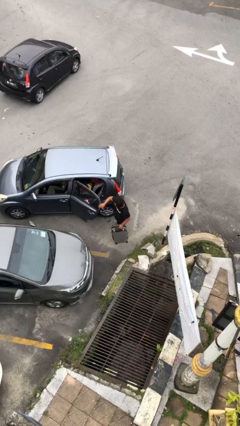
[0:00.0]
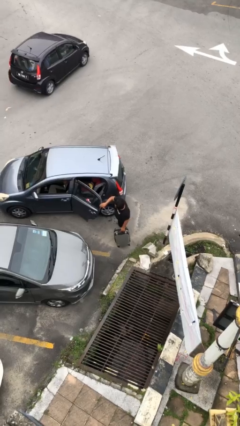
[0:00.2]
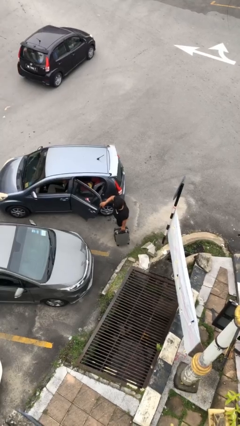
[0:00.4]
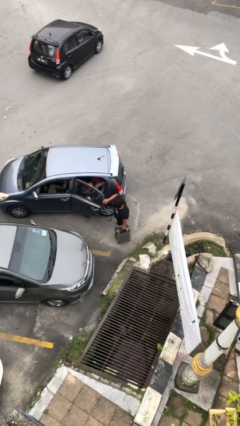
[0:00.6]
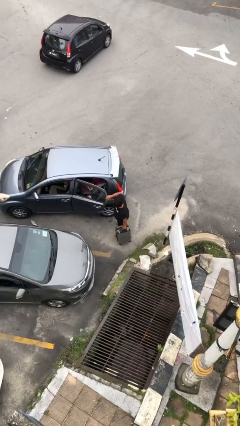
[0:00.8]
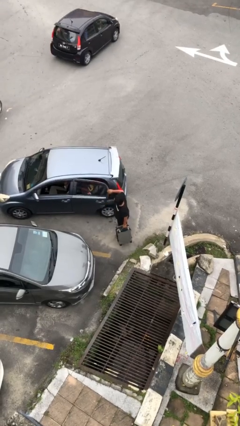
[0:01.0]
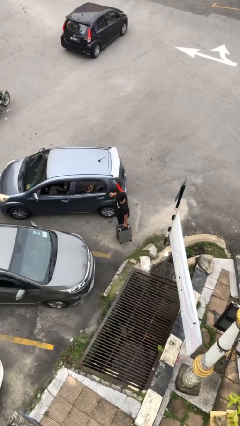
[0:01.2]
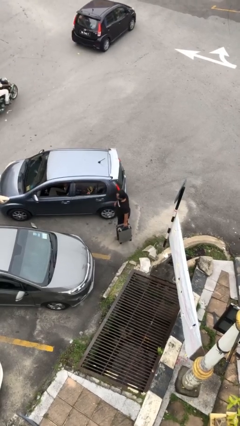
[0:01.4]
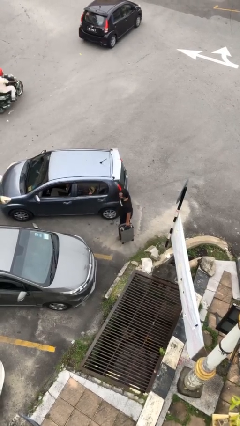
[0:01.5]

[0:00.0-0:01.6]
person closes car door

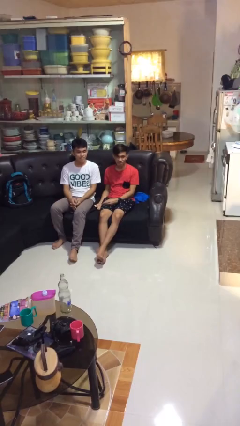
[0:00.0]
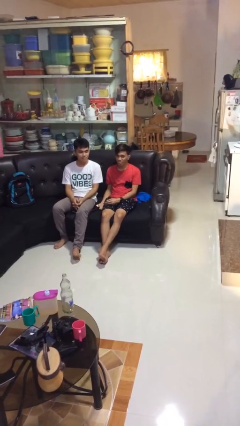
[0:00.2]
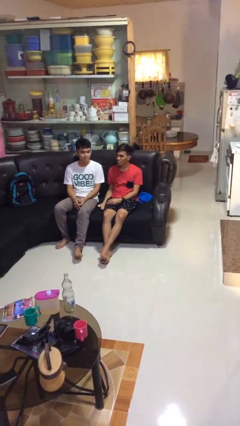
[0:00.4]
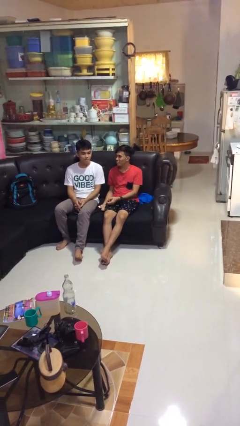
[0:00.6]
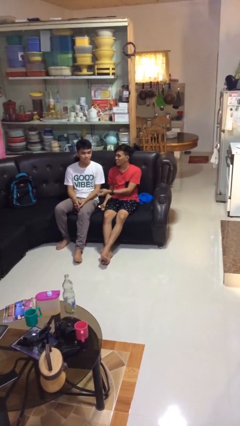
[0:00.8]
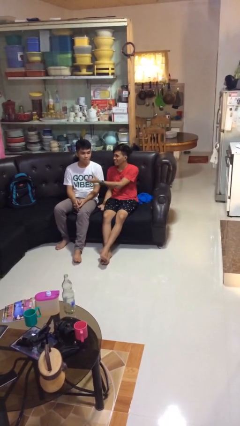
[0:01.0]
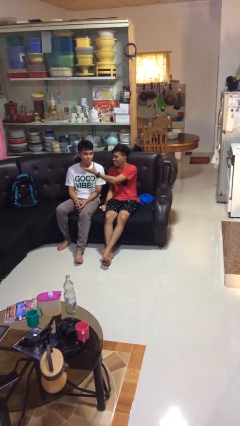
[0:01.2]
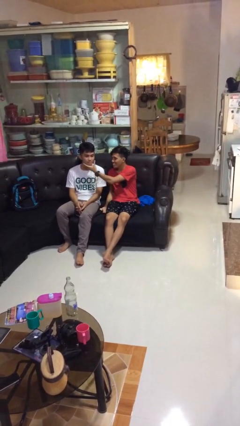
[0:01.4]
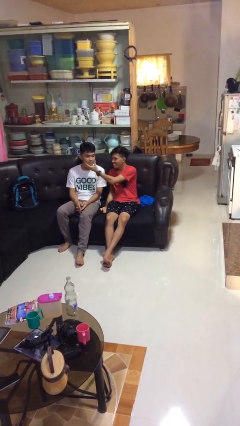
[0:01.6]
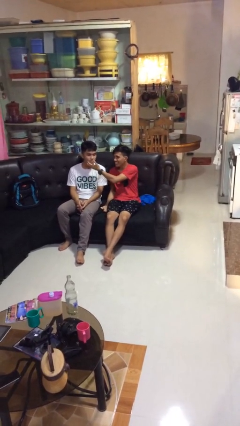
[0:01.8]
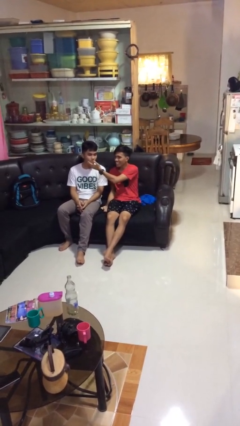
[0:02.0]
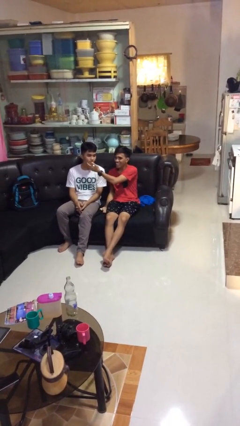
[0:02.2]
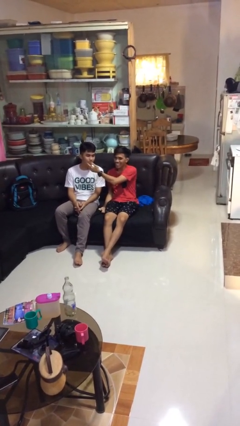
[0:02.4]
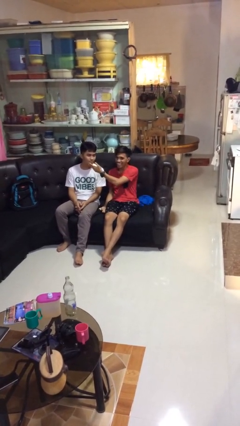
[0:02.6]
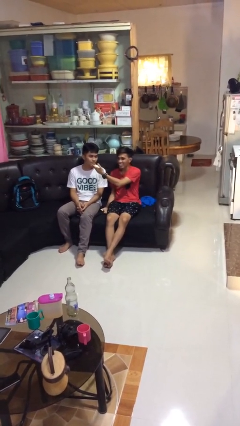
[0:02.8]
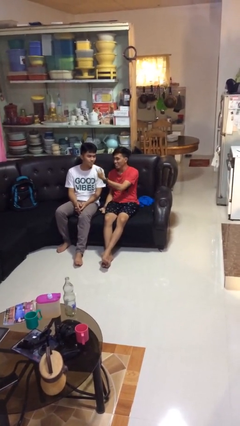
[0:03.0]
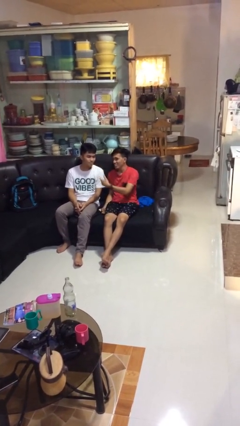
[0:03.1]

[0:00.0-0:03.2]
person touches face of person

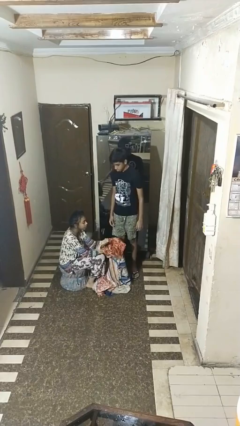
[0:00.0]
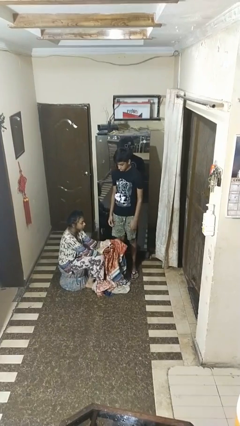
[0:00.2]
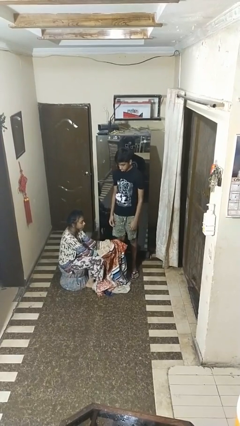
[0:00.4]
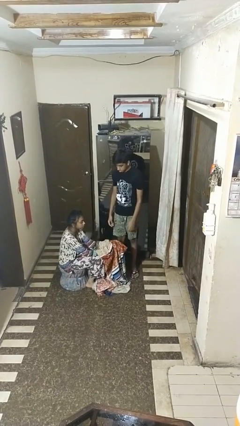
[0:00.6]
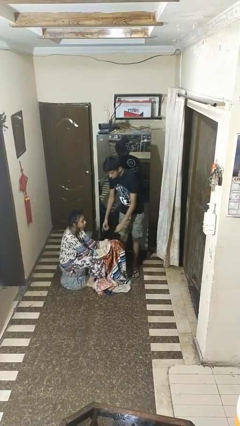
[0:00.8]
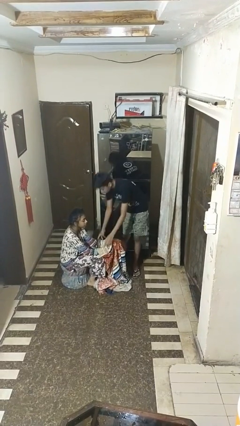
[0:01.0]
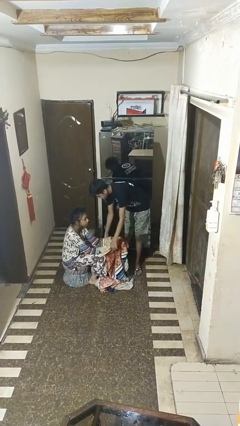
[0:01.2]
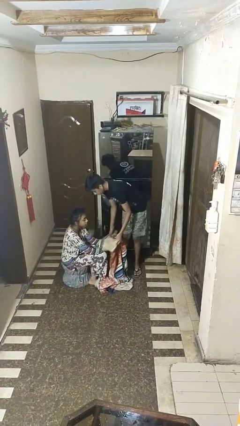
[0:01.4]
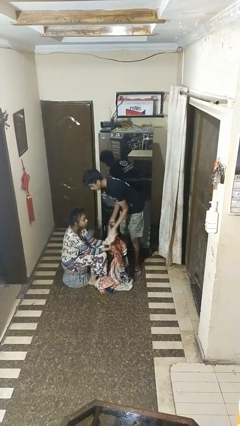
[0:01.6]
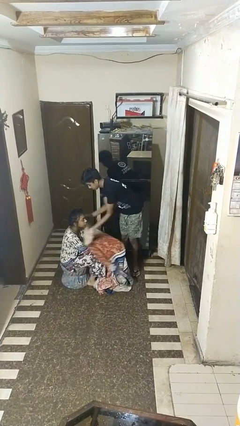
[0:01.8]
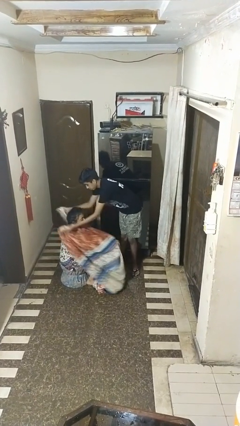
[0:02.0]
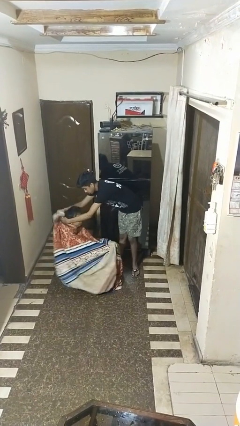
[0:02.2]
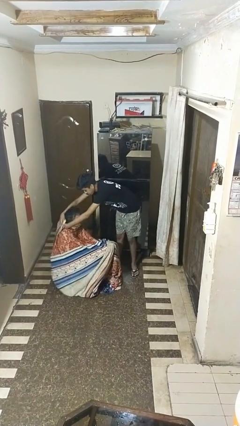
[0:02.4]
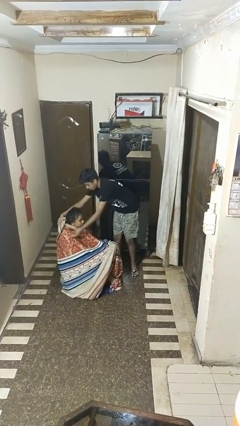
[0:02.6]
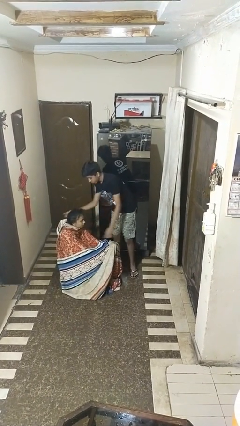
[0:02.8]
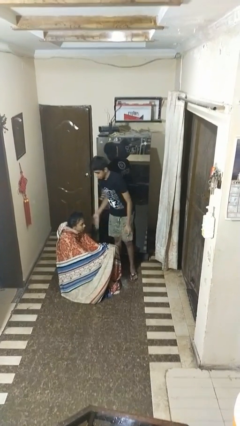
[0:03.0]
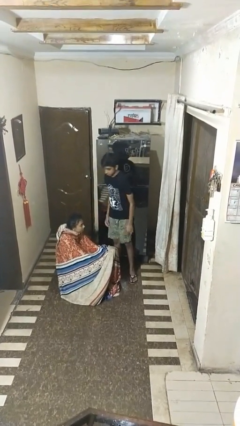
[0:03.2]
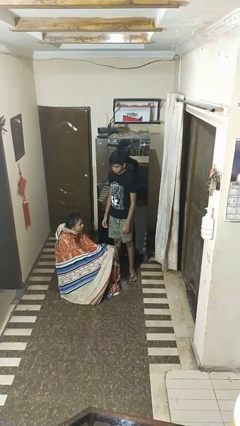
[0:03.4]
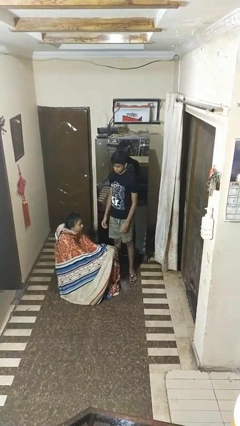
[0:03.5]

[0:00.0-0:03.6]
person covers friend with blanket

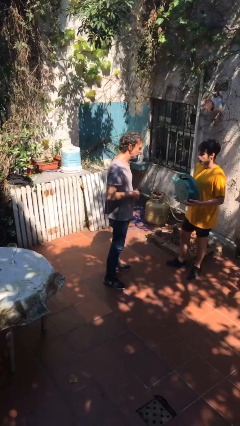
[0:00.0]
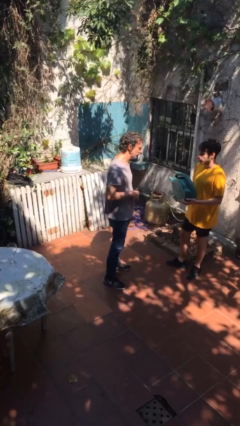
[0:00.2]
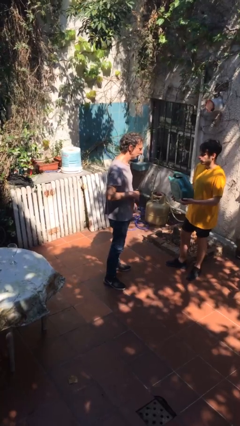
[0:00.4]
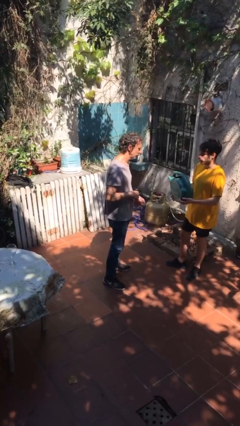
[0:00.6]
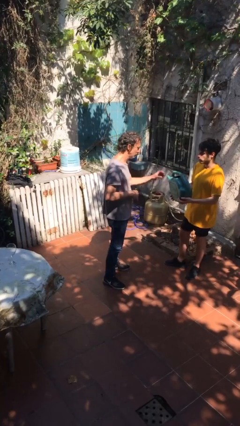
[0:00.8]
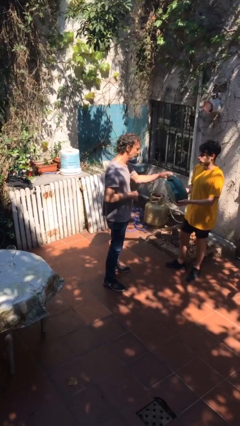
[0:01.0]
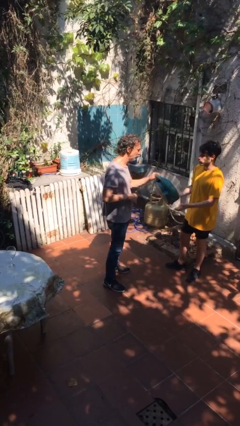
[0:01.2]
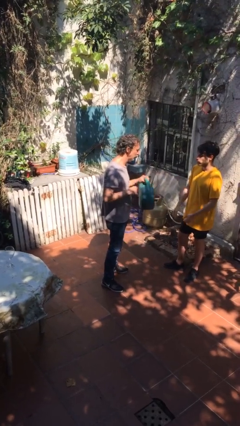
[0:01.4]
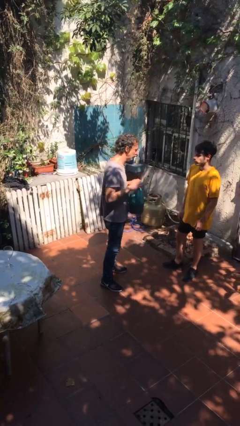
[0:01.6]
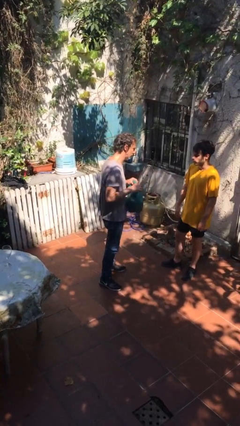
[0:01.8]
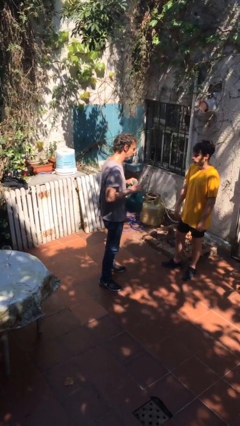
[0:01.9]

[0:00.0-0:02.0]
person transfers object to person

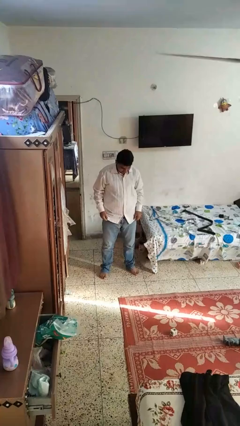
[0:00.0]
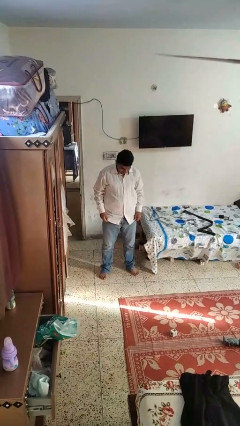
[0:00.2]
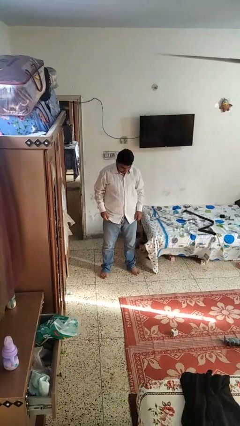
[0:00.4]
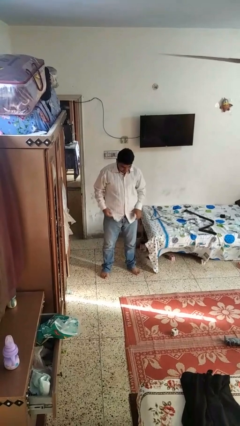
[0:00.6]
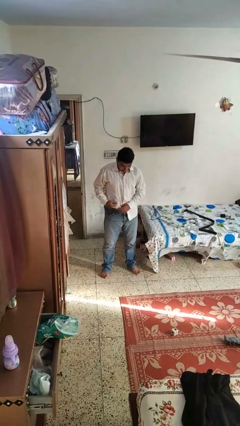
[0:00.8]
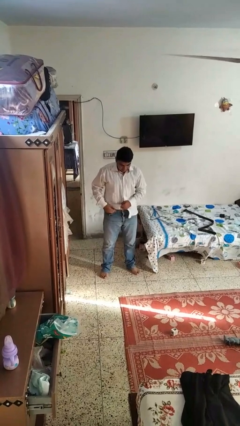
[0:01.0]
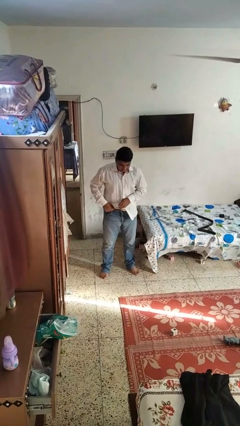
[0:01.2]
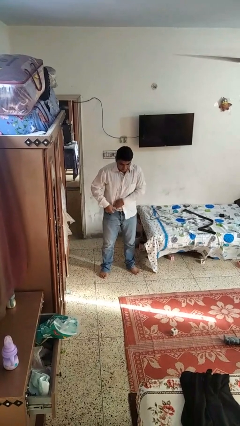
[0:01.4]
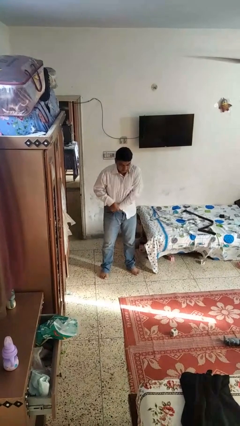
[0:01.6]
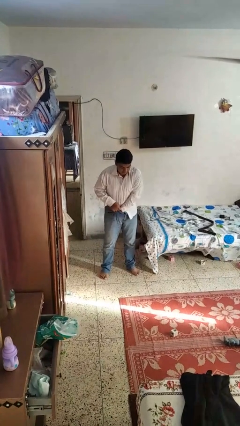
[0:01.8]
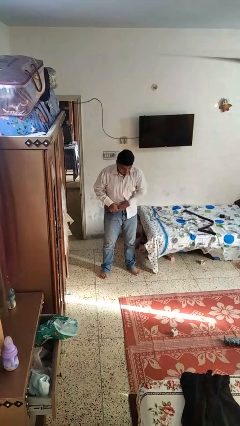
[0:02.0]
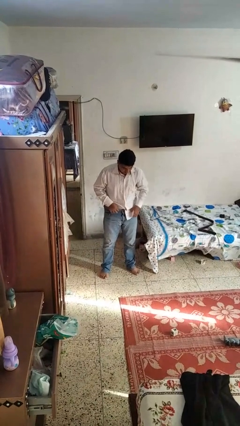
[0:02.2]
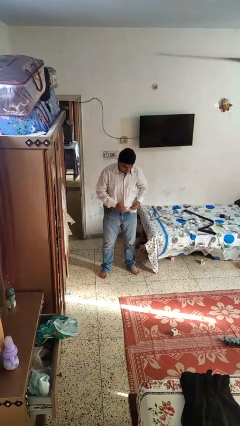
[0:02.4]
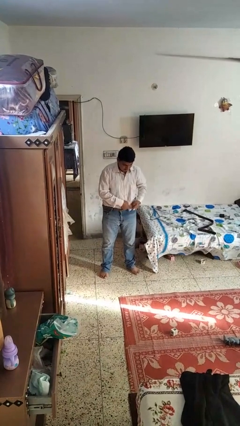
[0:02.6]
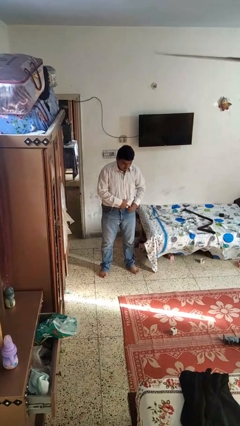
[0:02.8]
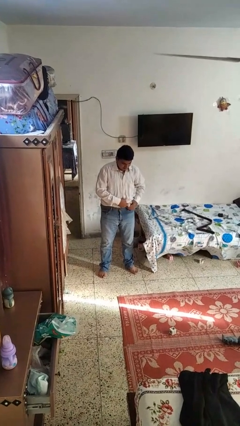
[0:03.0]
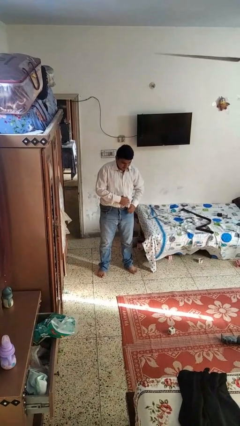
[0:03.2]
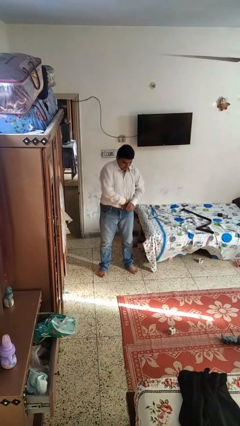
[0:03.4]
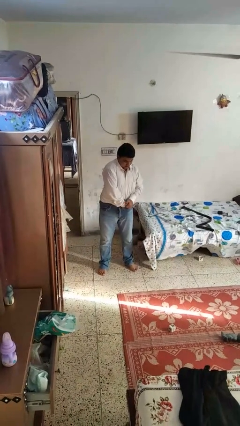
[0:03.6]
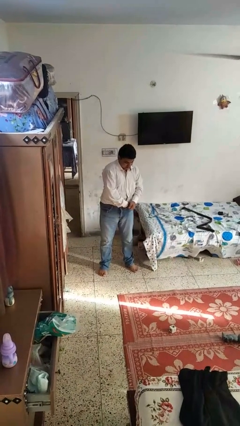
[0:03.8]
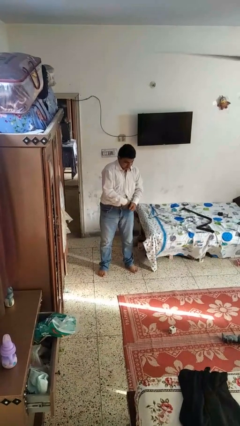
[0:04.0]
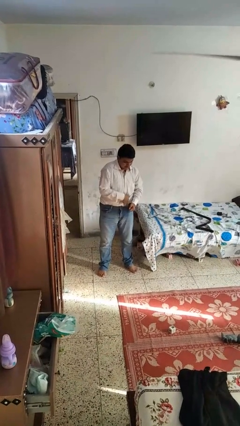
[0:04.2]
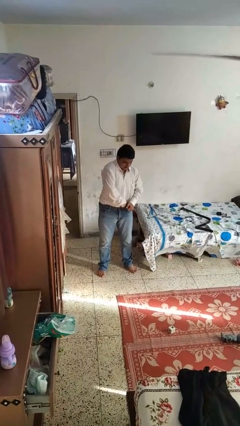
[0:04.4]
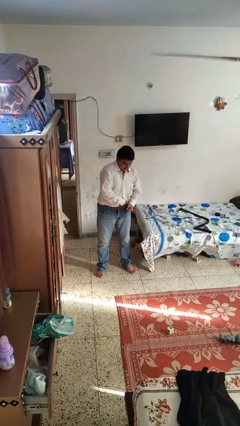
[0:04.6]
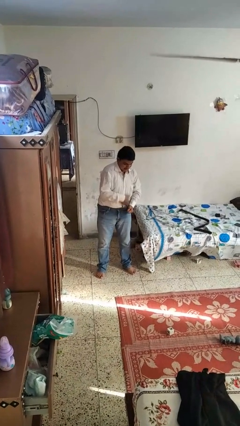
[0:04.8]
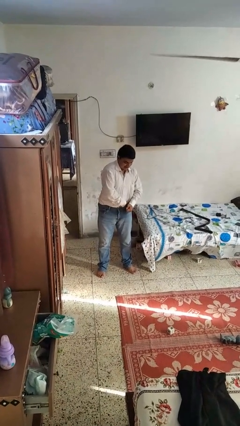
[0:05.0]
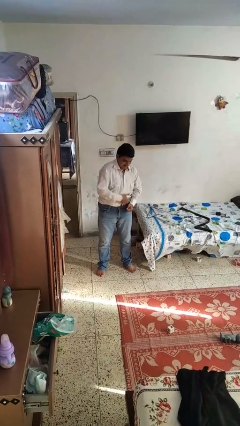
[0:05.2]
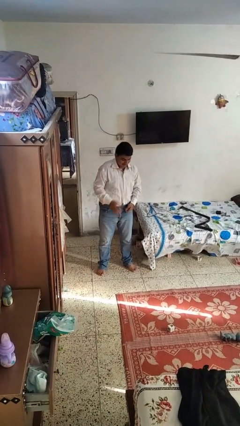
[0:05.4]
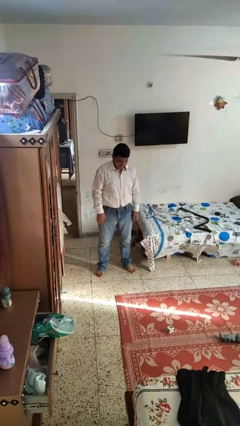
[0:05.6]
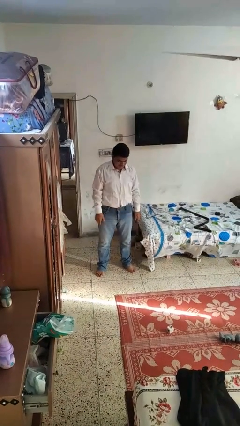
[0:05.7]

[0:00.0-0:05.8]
person tucks in shirt

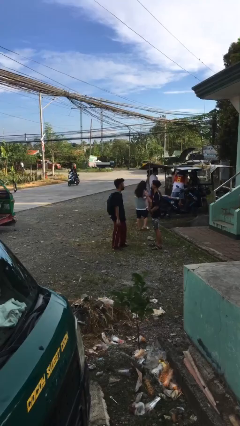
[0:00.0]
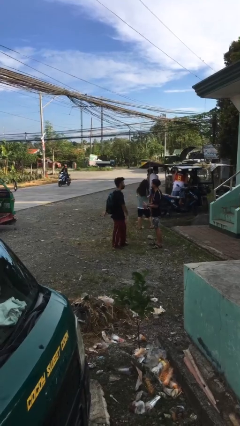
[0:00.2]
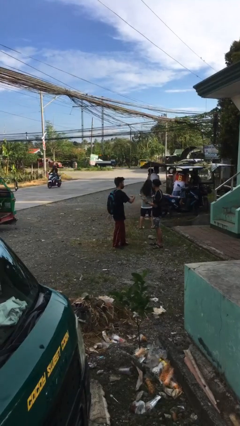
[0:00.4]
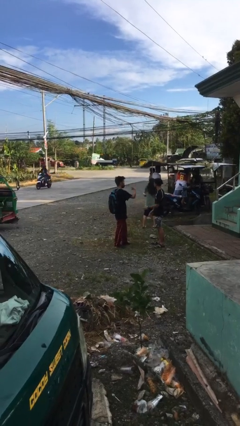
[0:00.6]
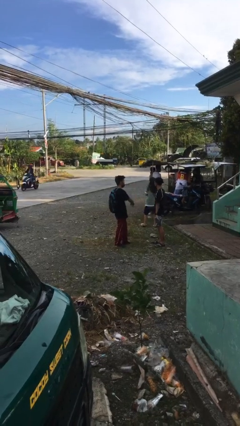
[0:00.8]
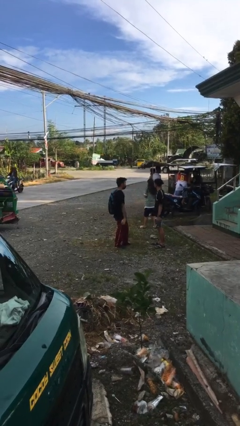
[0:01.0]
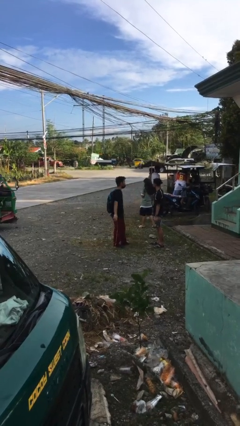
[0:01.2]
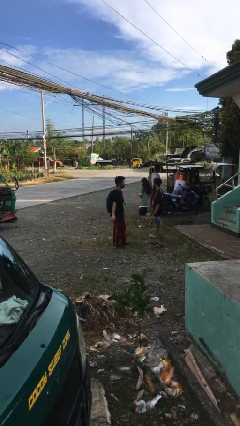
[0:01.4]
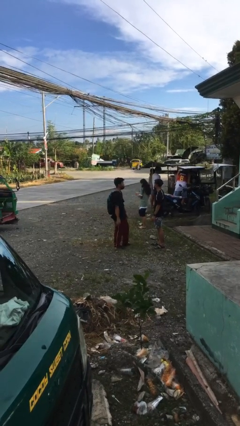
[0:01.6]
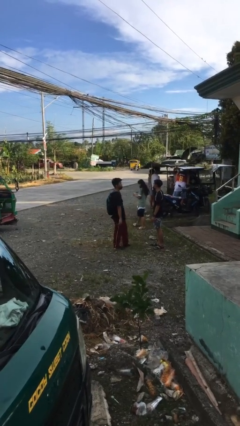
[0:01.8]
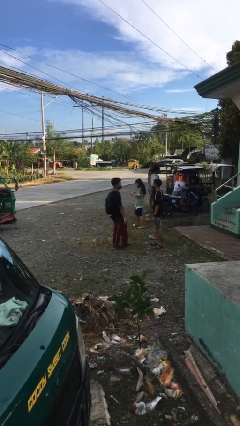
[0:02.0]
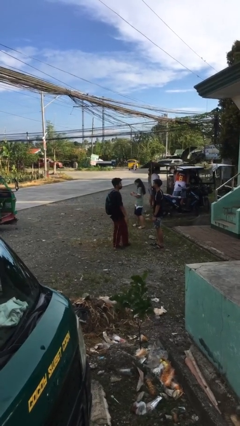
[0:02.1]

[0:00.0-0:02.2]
person talks to person
